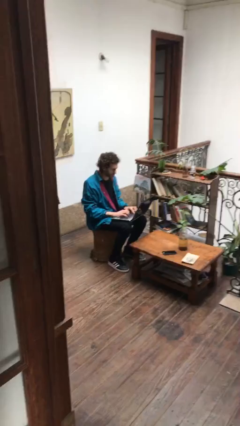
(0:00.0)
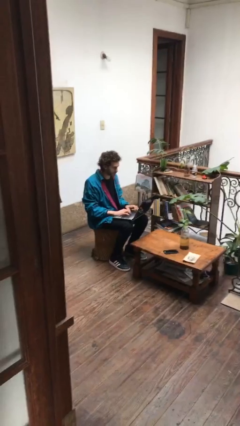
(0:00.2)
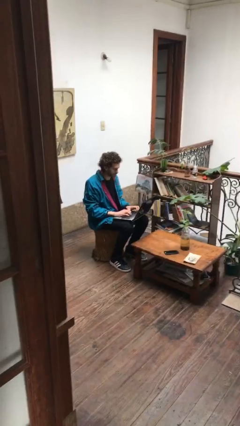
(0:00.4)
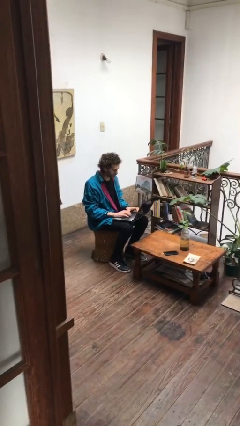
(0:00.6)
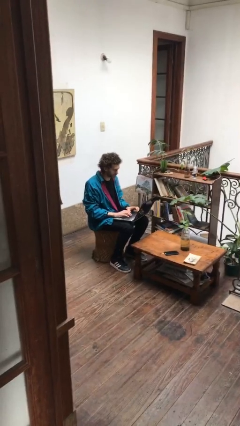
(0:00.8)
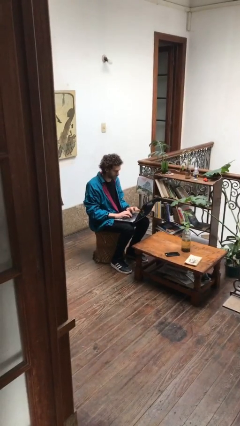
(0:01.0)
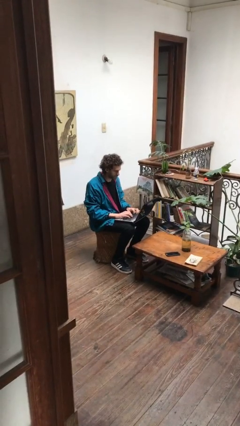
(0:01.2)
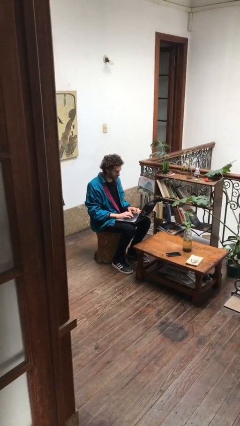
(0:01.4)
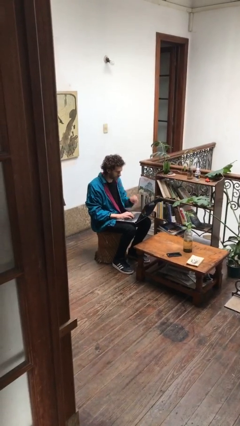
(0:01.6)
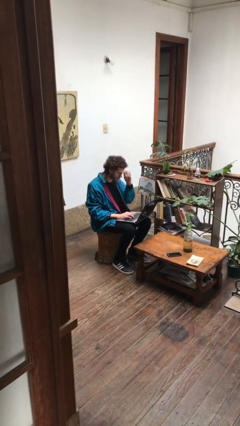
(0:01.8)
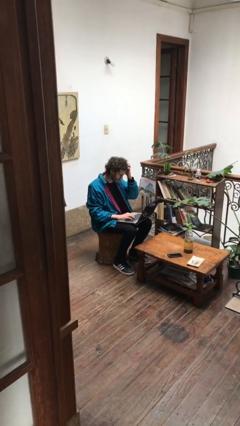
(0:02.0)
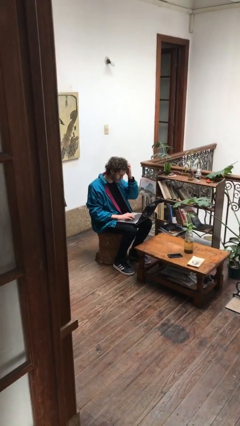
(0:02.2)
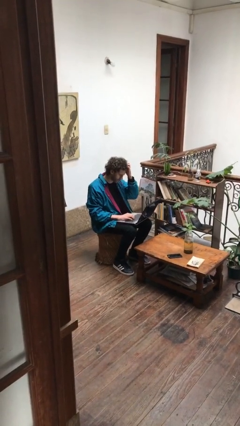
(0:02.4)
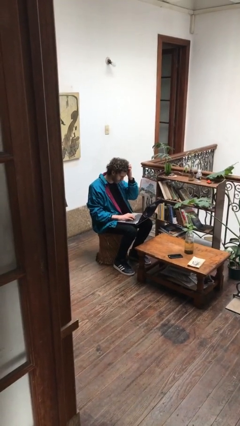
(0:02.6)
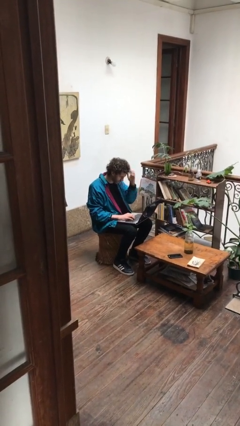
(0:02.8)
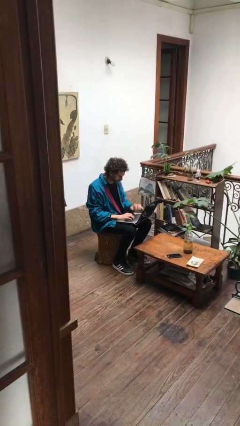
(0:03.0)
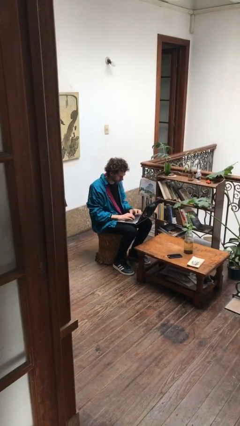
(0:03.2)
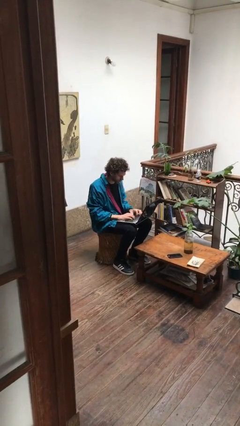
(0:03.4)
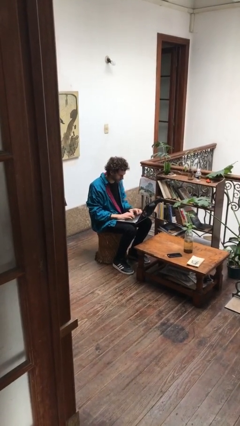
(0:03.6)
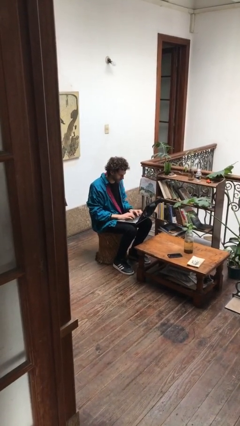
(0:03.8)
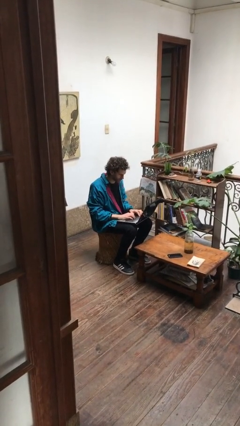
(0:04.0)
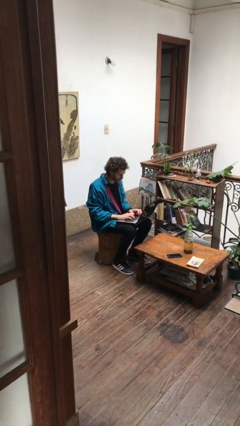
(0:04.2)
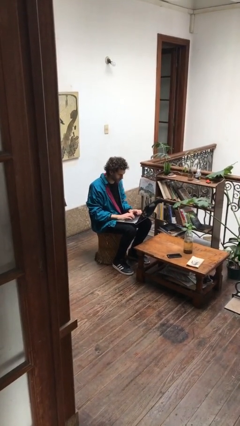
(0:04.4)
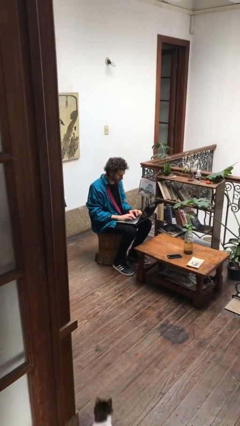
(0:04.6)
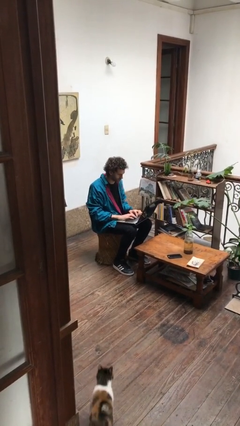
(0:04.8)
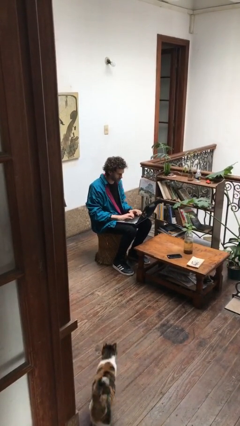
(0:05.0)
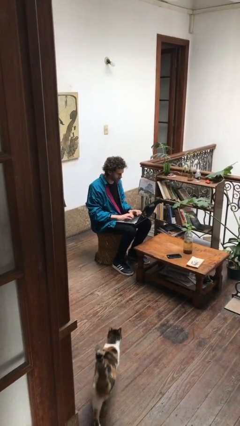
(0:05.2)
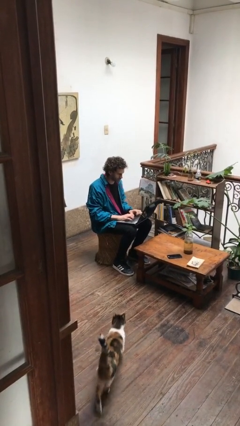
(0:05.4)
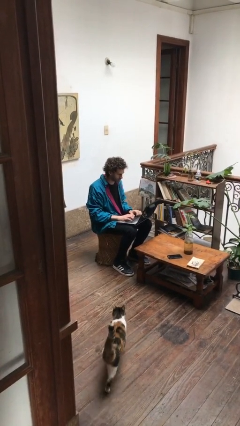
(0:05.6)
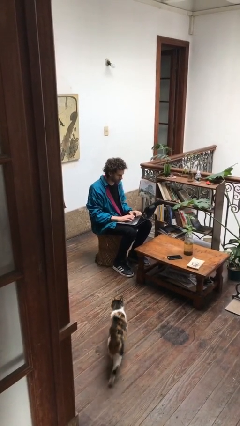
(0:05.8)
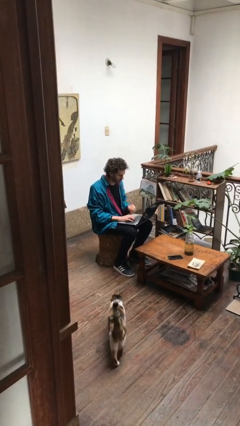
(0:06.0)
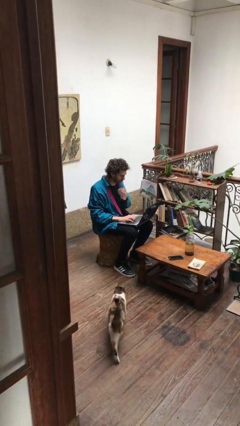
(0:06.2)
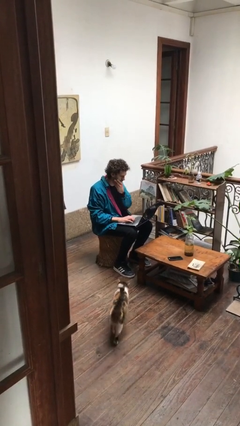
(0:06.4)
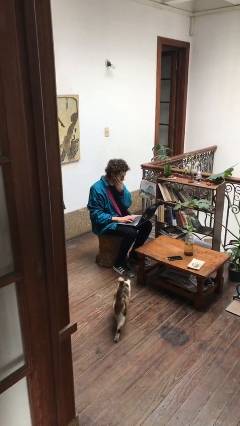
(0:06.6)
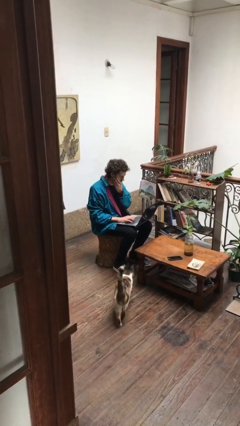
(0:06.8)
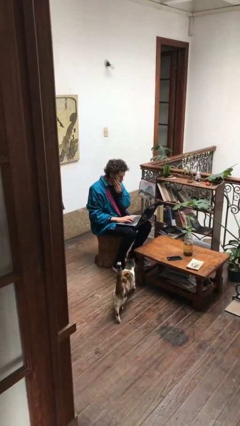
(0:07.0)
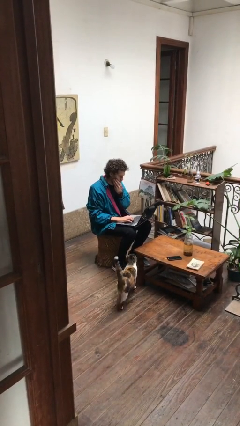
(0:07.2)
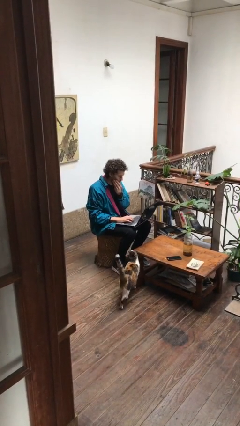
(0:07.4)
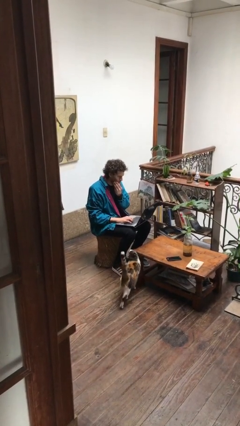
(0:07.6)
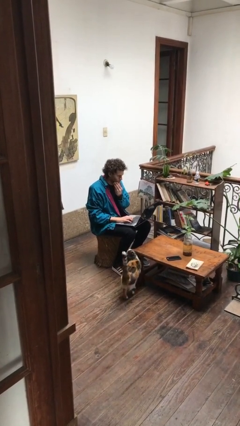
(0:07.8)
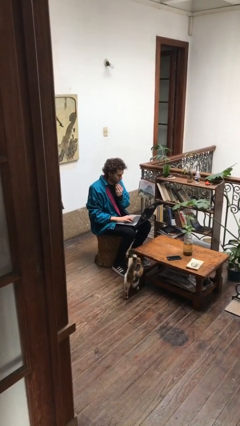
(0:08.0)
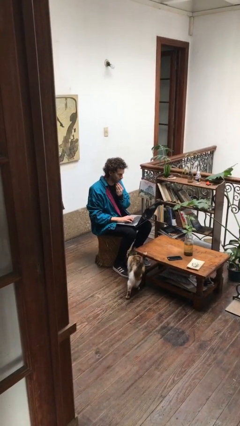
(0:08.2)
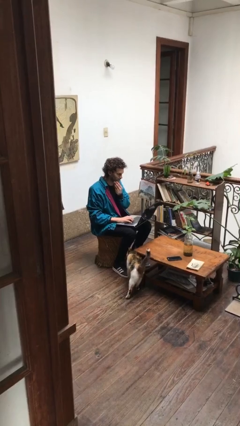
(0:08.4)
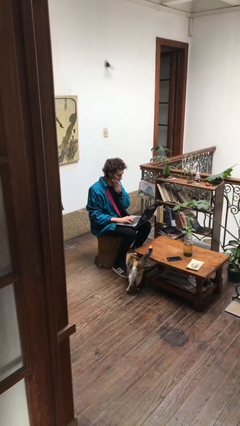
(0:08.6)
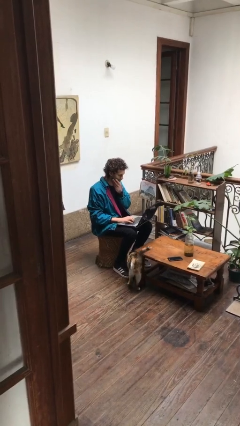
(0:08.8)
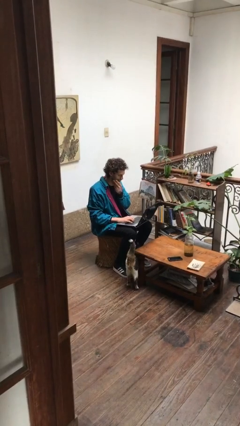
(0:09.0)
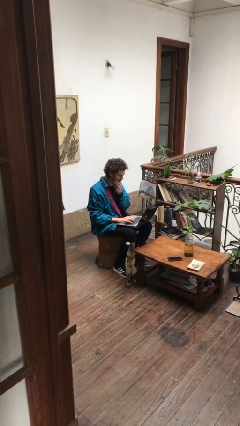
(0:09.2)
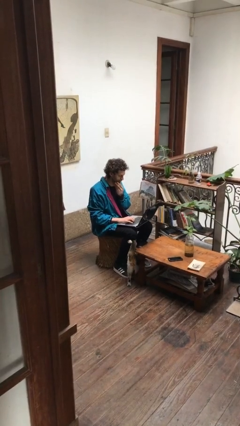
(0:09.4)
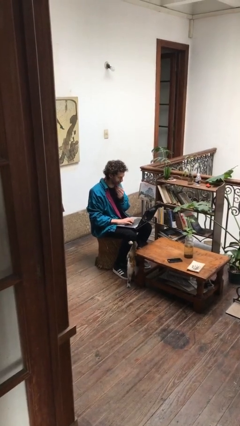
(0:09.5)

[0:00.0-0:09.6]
person interacts with laptop

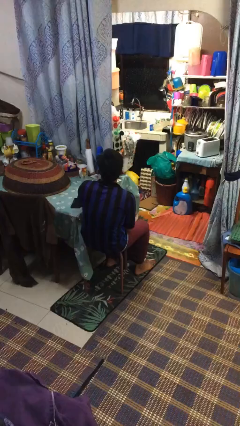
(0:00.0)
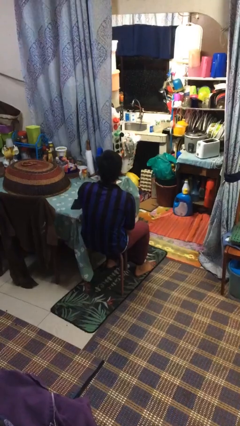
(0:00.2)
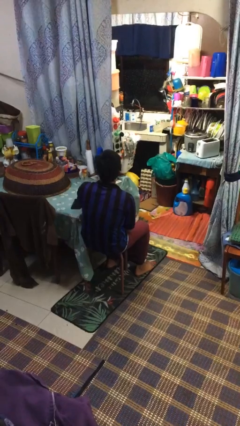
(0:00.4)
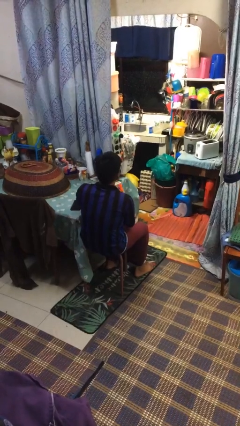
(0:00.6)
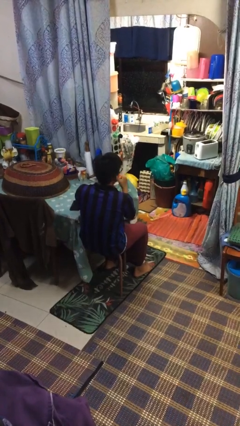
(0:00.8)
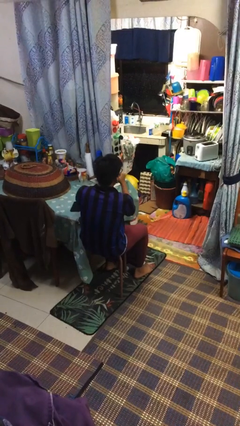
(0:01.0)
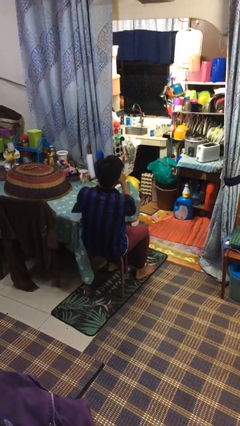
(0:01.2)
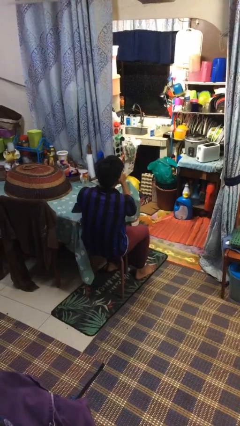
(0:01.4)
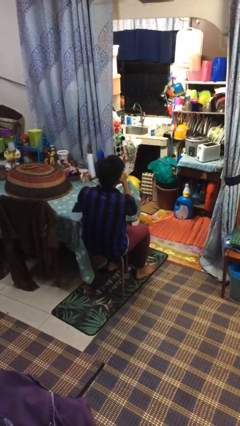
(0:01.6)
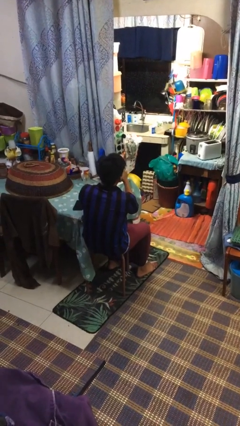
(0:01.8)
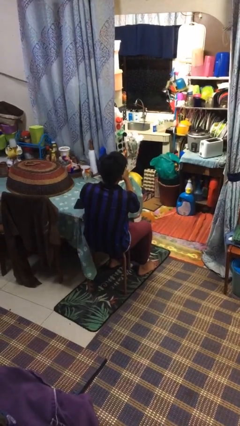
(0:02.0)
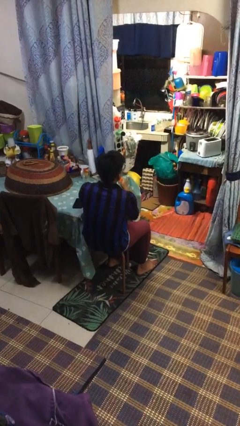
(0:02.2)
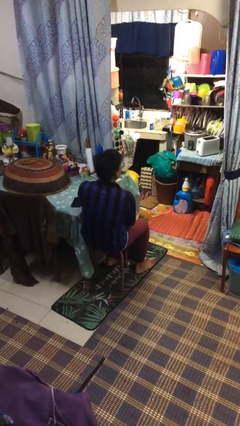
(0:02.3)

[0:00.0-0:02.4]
person vapes

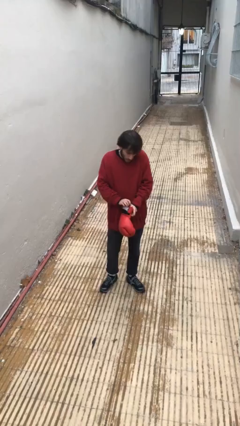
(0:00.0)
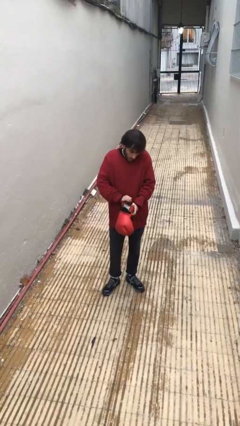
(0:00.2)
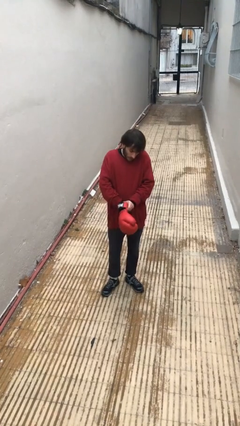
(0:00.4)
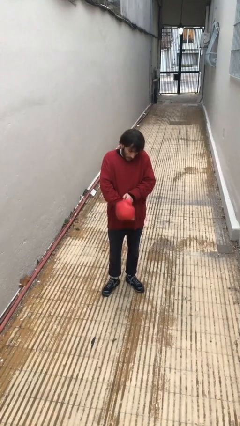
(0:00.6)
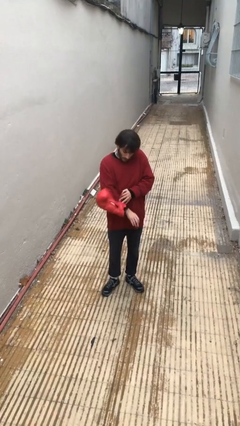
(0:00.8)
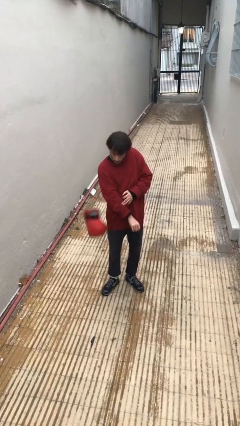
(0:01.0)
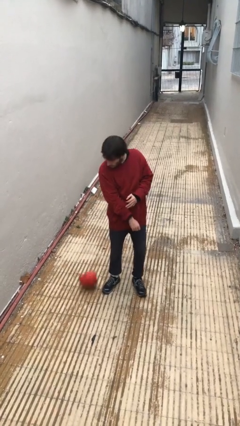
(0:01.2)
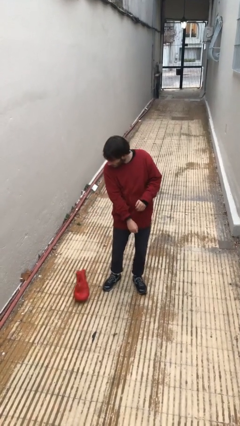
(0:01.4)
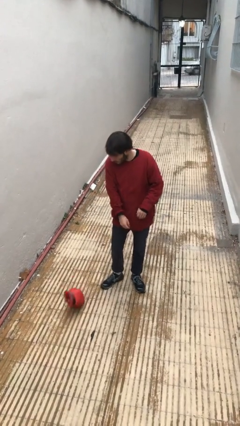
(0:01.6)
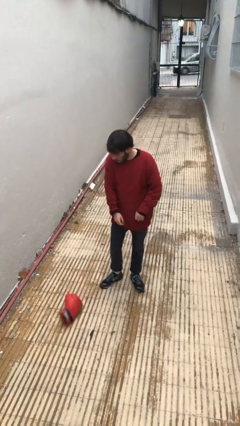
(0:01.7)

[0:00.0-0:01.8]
person drops object

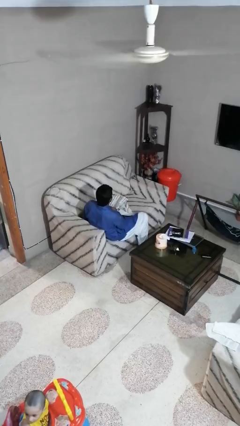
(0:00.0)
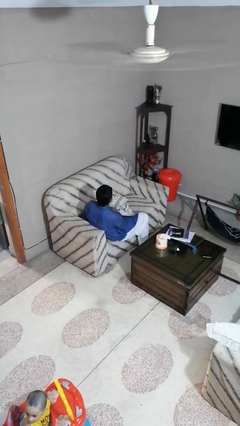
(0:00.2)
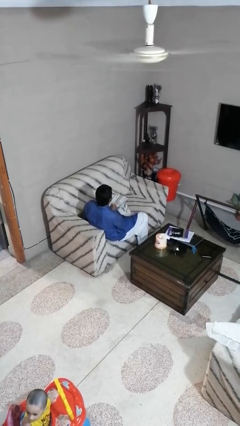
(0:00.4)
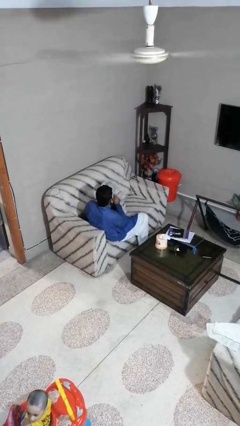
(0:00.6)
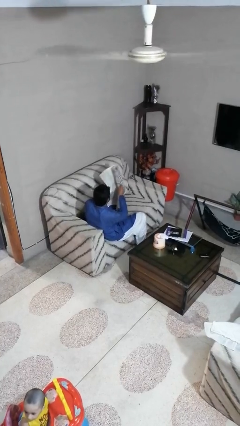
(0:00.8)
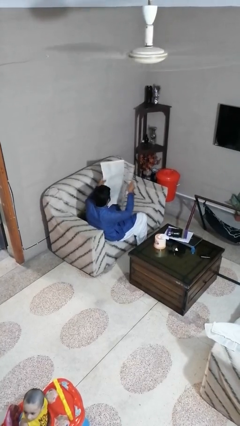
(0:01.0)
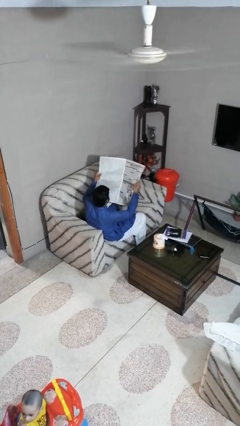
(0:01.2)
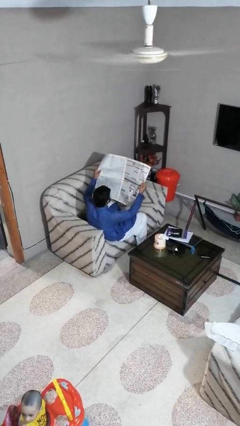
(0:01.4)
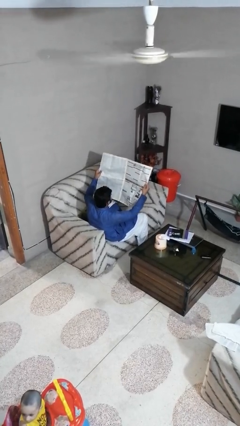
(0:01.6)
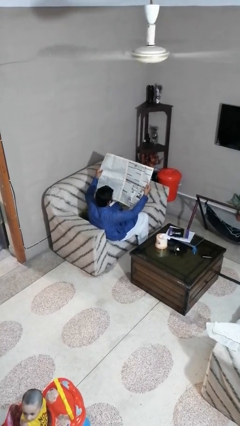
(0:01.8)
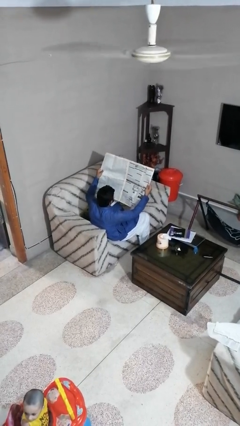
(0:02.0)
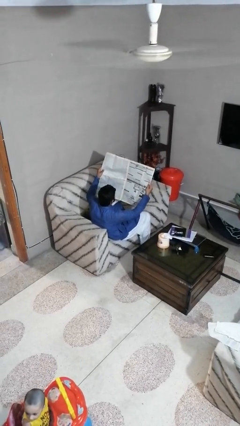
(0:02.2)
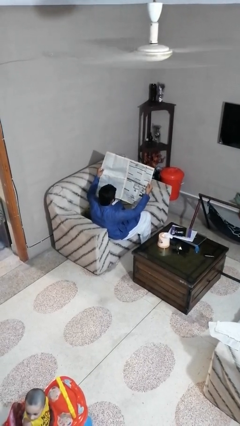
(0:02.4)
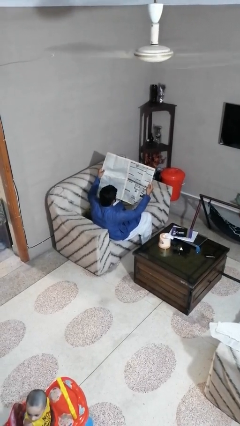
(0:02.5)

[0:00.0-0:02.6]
person reads newspaper

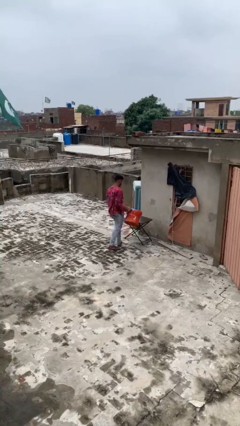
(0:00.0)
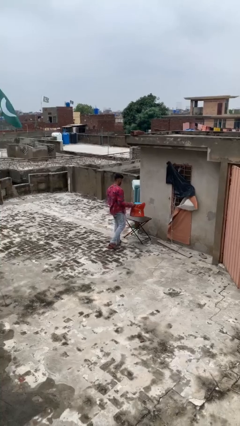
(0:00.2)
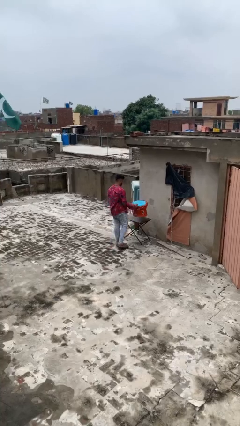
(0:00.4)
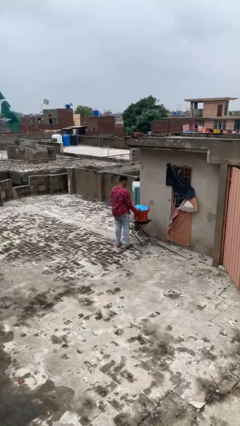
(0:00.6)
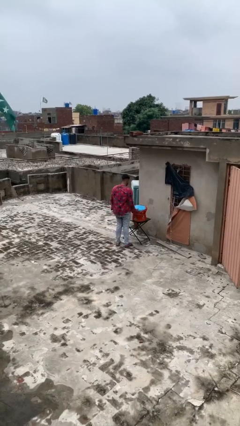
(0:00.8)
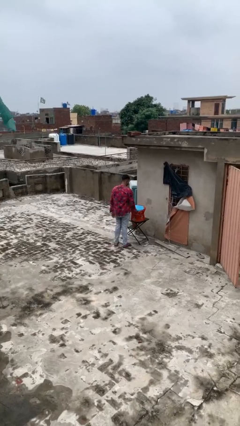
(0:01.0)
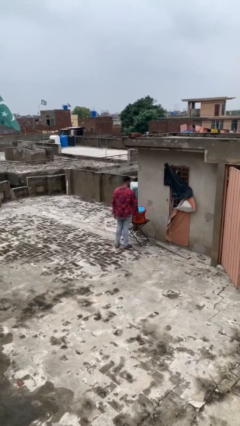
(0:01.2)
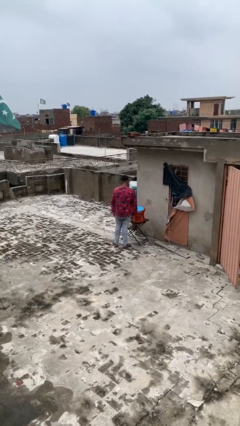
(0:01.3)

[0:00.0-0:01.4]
person puts down object on table
